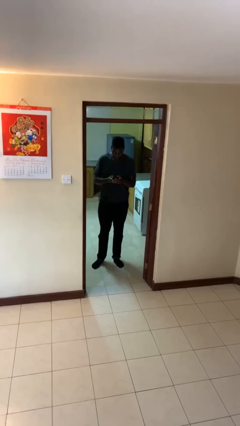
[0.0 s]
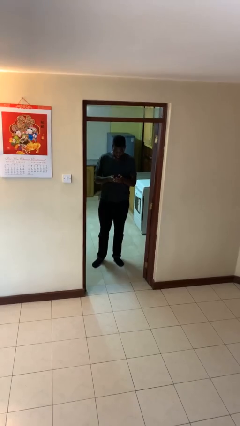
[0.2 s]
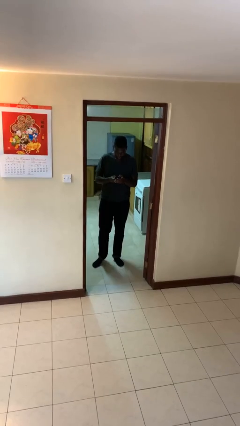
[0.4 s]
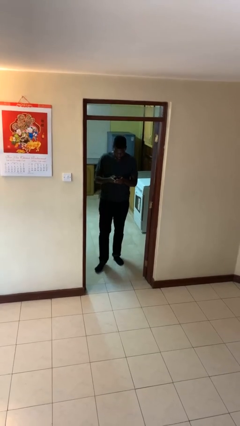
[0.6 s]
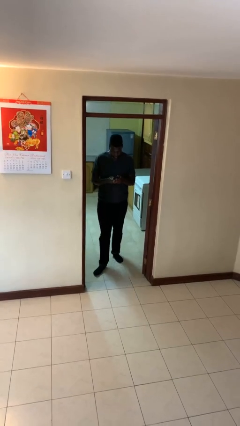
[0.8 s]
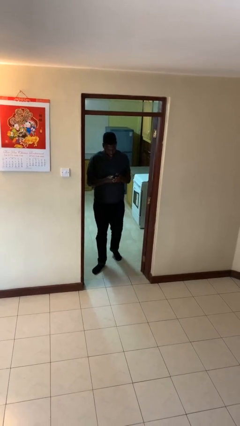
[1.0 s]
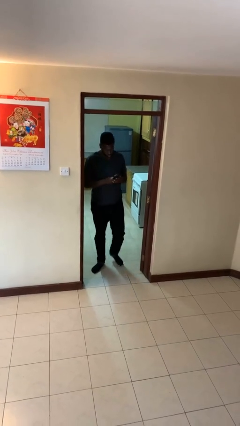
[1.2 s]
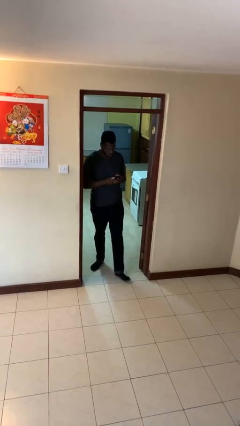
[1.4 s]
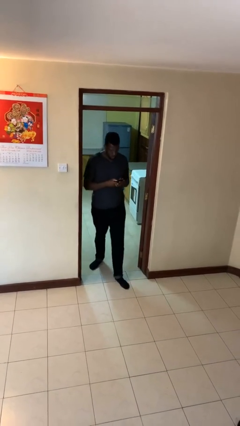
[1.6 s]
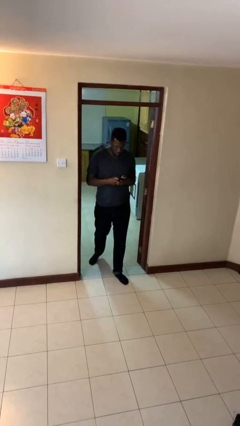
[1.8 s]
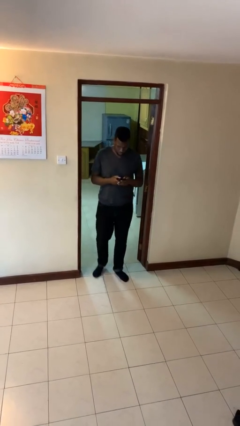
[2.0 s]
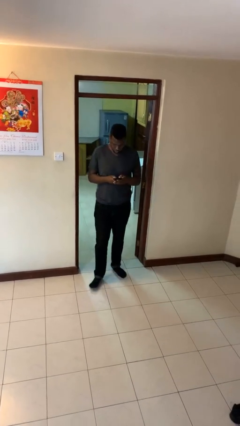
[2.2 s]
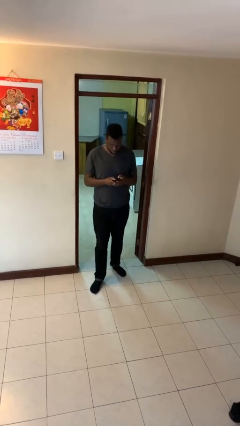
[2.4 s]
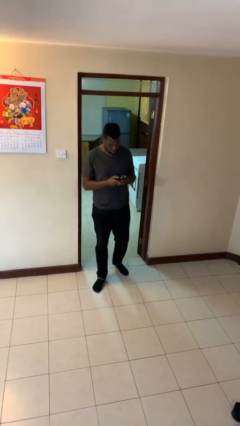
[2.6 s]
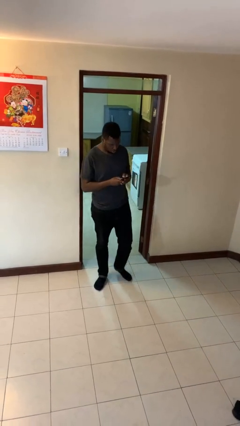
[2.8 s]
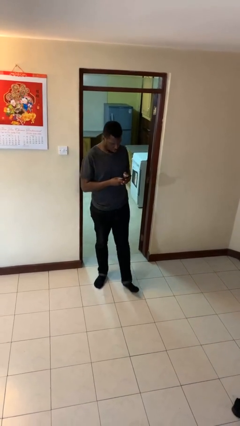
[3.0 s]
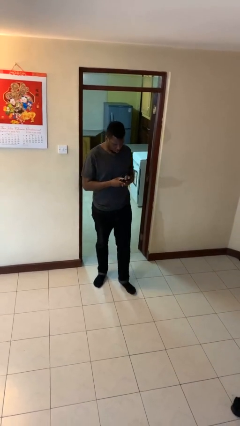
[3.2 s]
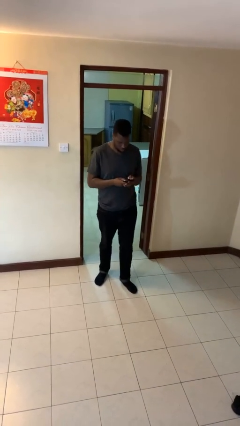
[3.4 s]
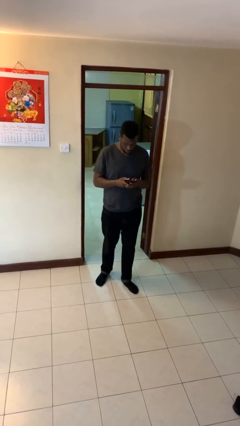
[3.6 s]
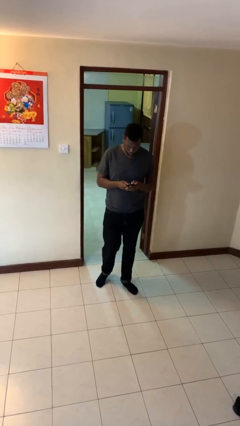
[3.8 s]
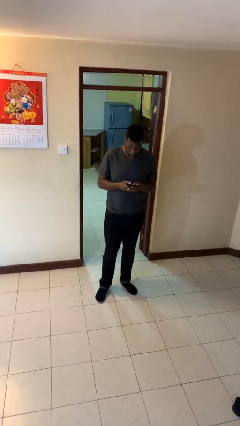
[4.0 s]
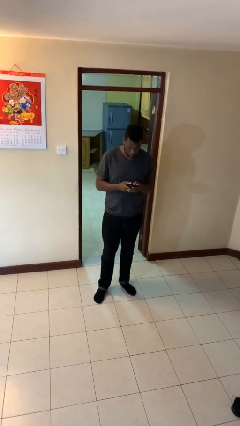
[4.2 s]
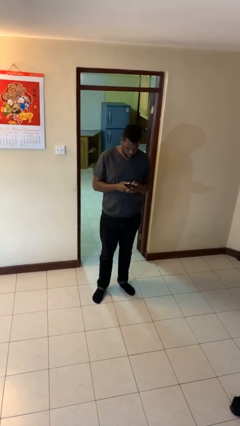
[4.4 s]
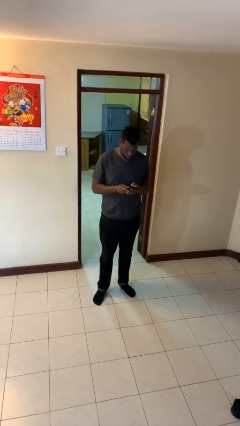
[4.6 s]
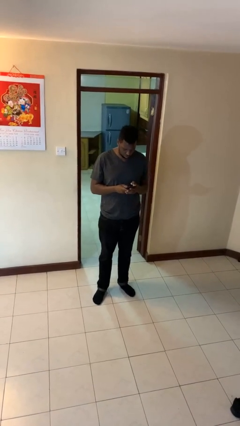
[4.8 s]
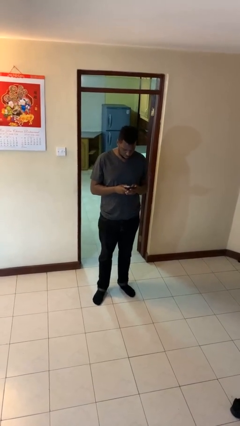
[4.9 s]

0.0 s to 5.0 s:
person enters scene through structure

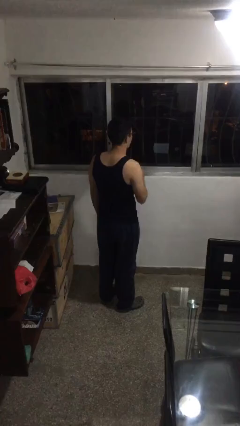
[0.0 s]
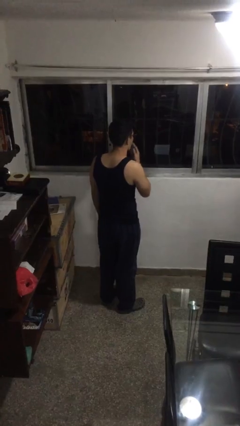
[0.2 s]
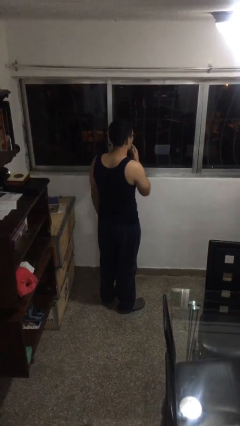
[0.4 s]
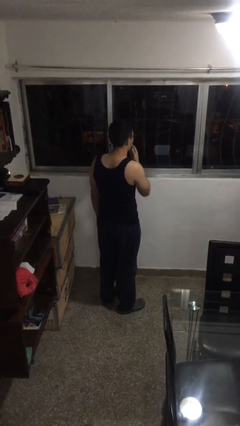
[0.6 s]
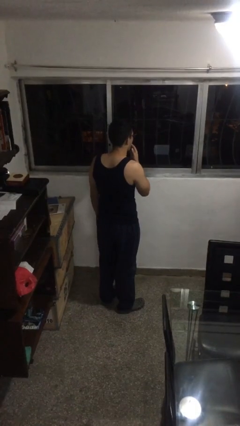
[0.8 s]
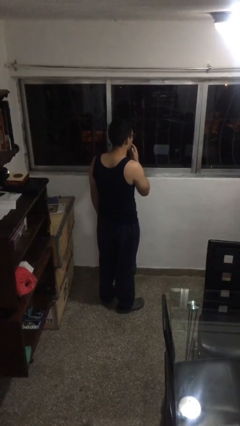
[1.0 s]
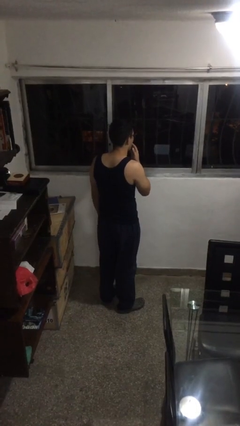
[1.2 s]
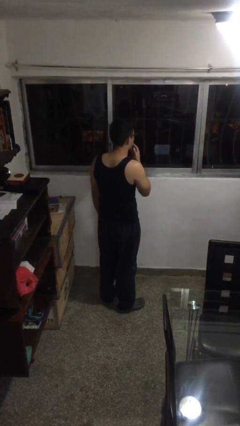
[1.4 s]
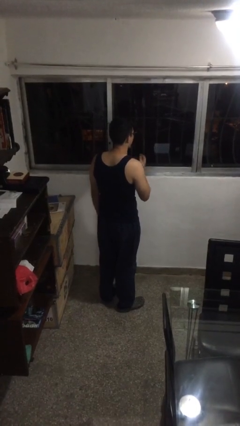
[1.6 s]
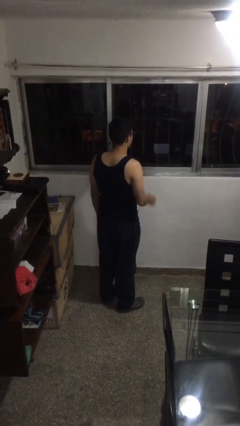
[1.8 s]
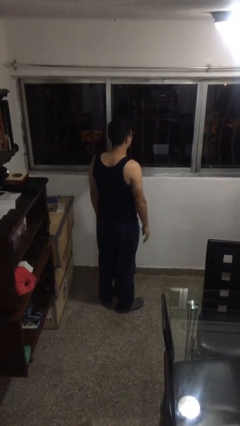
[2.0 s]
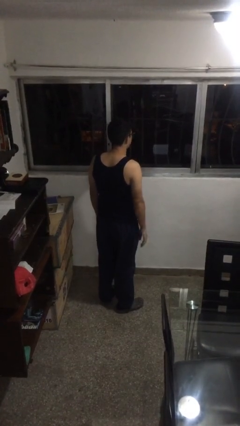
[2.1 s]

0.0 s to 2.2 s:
person licks fingers

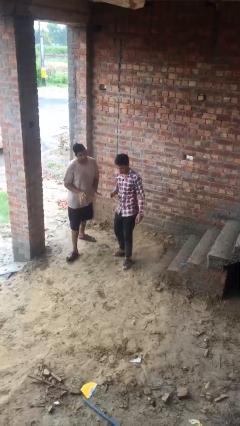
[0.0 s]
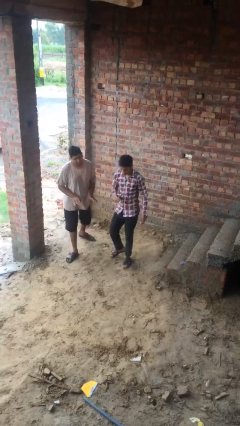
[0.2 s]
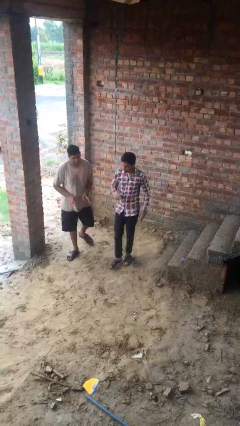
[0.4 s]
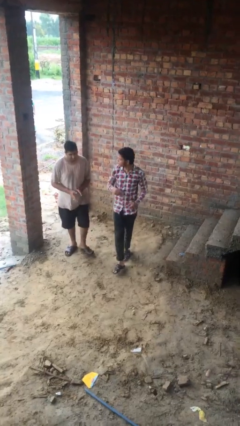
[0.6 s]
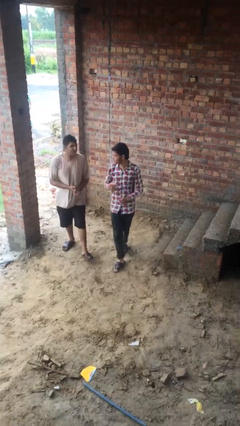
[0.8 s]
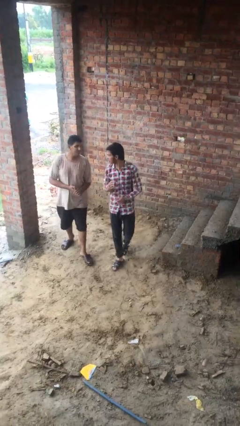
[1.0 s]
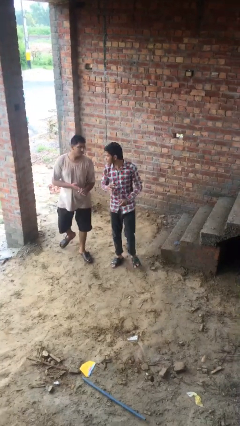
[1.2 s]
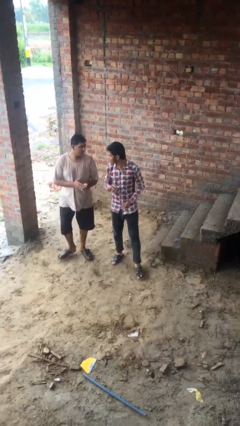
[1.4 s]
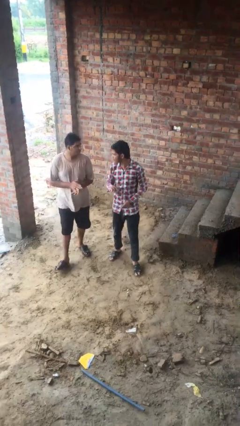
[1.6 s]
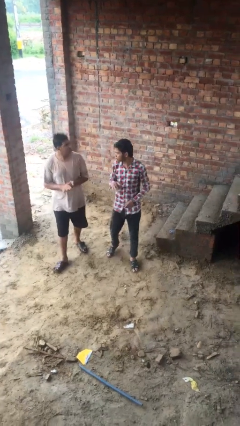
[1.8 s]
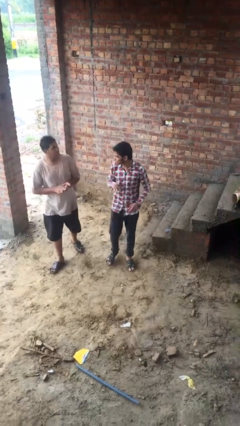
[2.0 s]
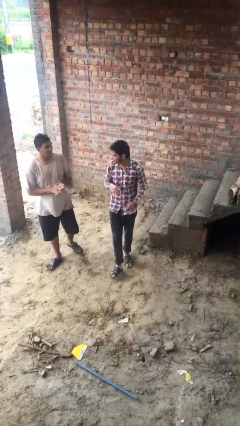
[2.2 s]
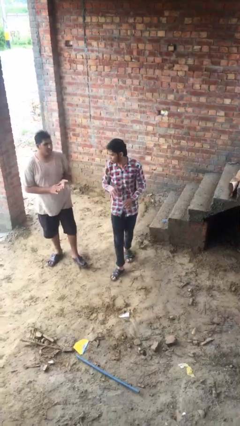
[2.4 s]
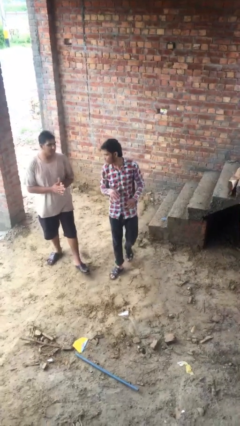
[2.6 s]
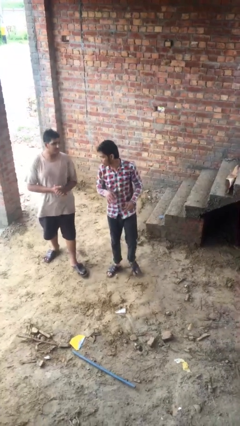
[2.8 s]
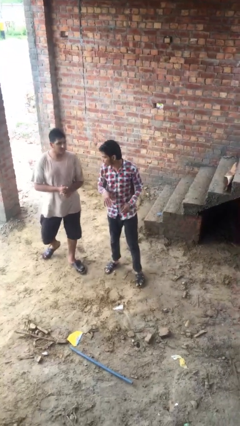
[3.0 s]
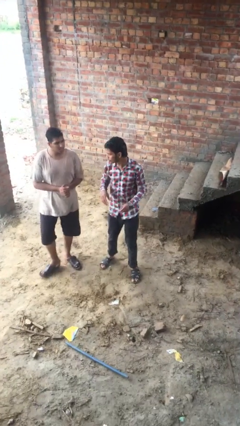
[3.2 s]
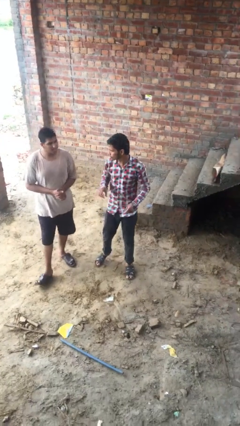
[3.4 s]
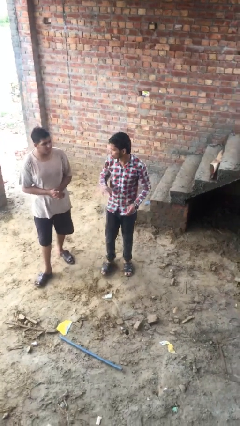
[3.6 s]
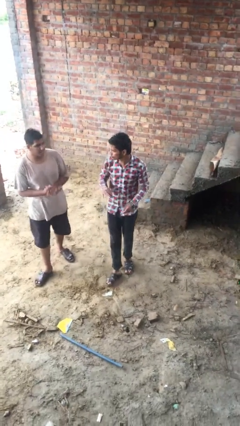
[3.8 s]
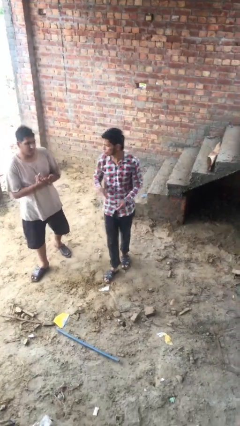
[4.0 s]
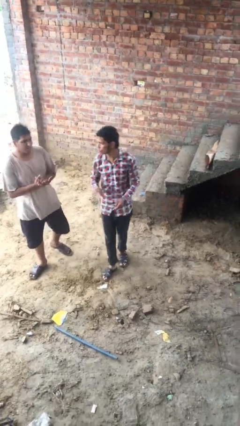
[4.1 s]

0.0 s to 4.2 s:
person talks to person

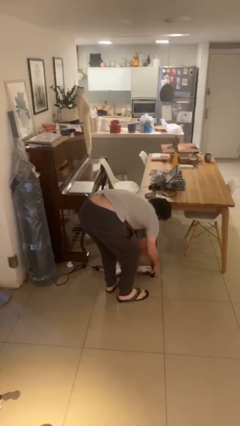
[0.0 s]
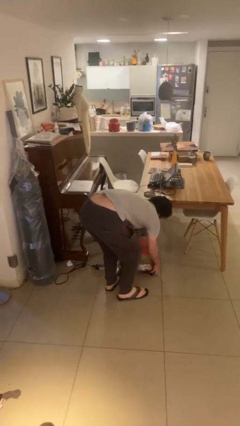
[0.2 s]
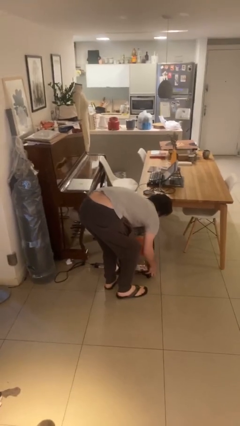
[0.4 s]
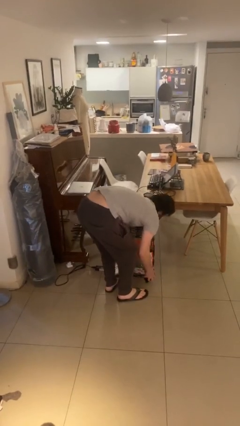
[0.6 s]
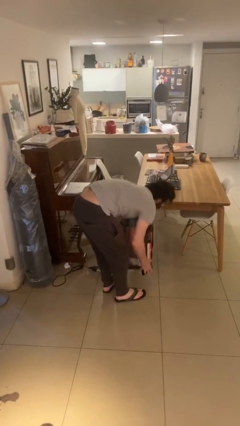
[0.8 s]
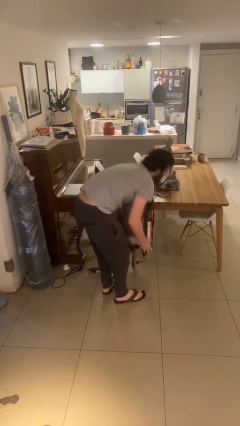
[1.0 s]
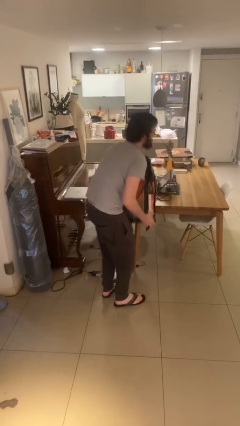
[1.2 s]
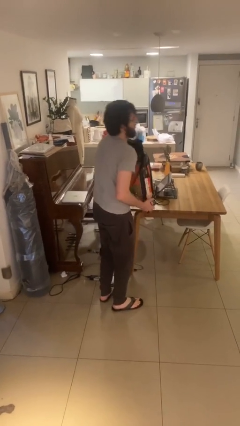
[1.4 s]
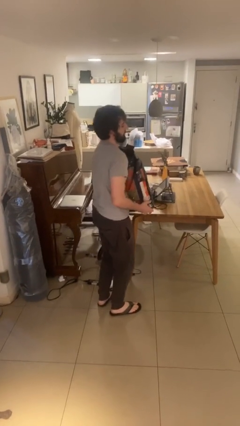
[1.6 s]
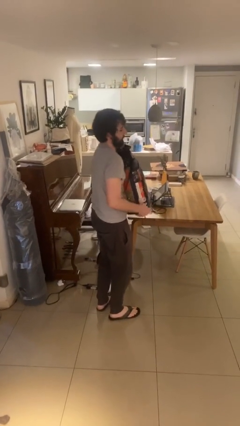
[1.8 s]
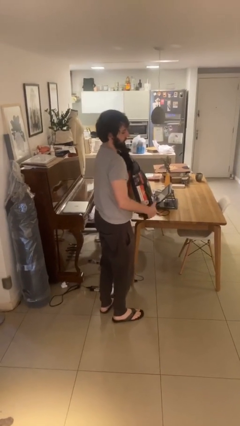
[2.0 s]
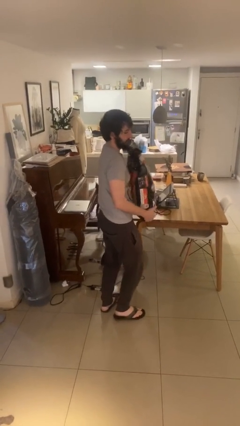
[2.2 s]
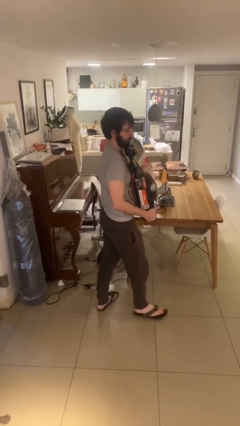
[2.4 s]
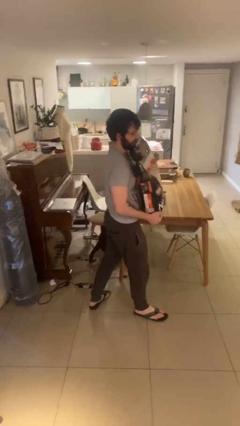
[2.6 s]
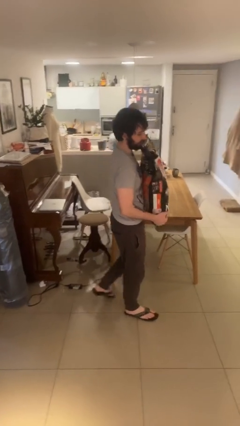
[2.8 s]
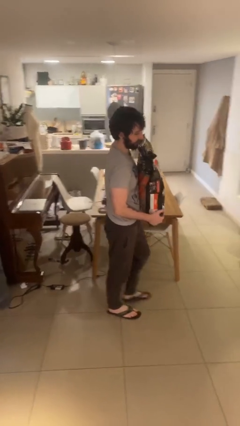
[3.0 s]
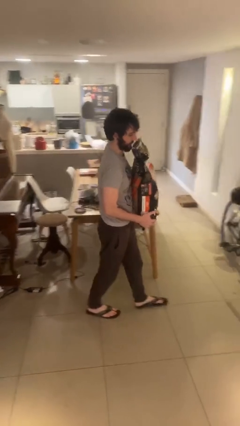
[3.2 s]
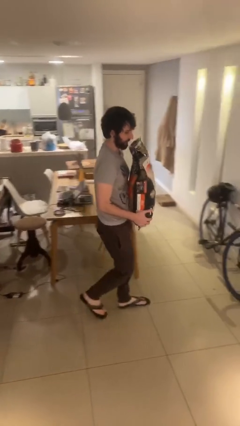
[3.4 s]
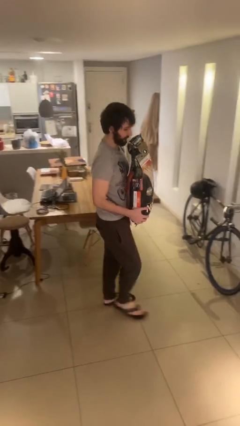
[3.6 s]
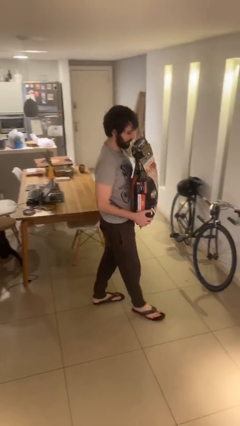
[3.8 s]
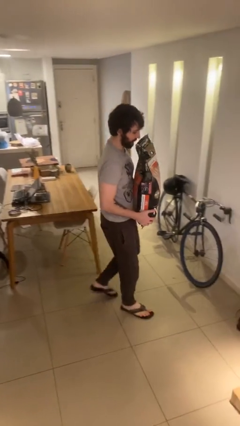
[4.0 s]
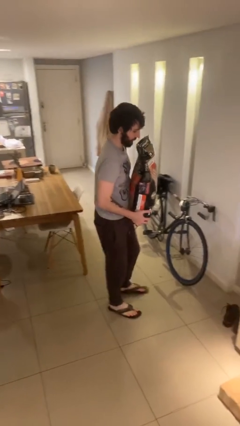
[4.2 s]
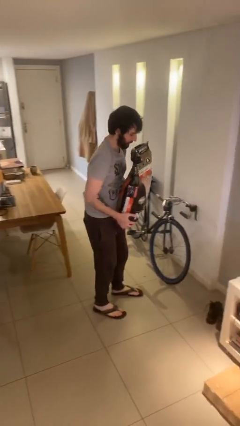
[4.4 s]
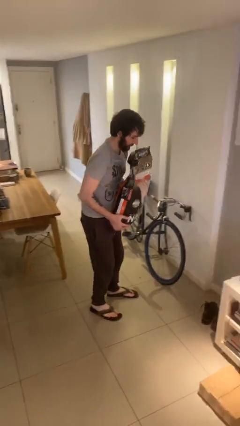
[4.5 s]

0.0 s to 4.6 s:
person carries heavy object

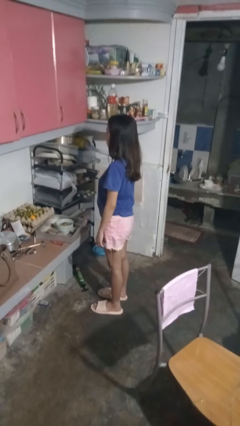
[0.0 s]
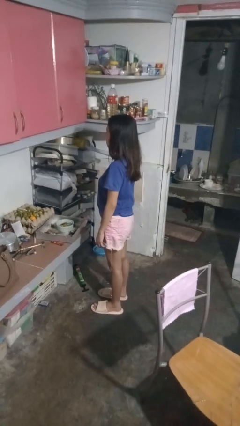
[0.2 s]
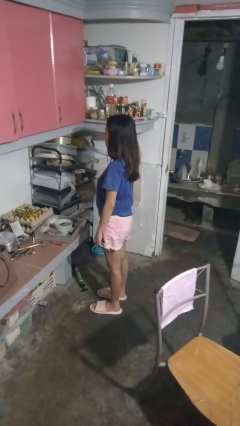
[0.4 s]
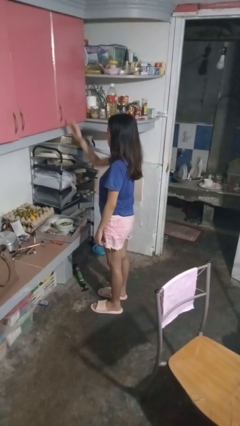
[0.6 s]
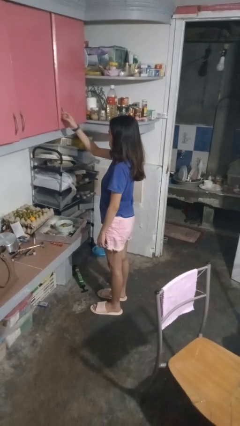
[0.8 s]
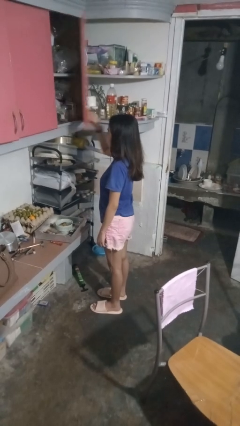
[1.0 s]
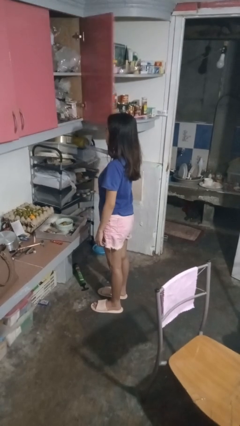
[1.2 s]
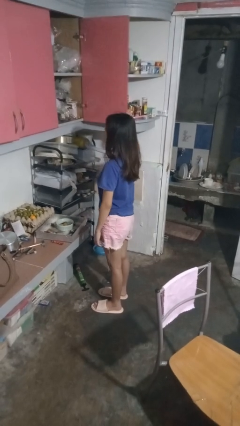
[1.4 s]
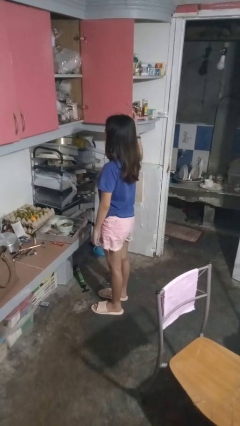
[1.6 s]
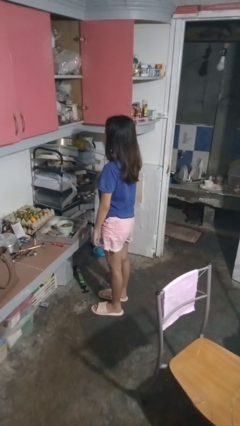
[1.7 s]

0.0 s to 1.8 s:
person opens cabinet
